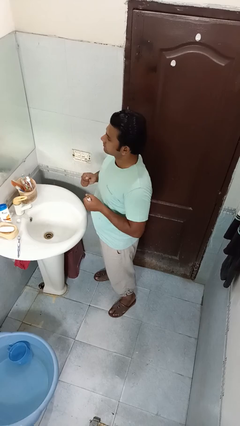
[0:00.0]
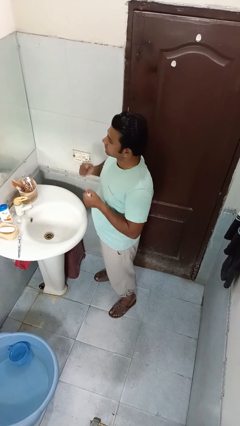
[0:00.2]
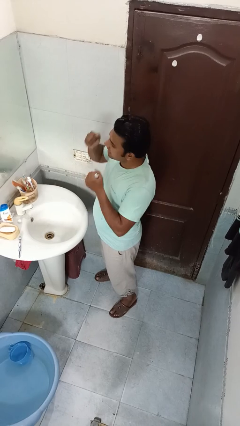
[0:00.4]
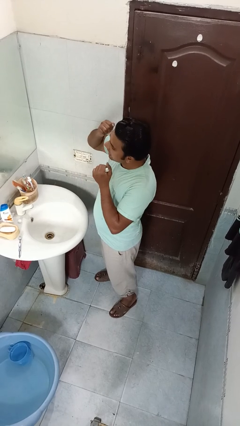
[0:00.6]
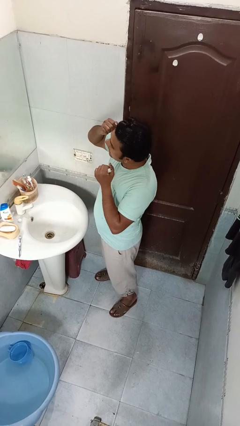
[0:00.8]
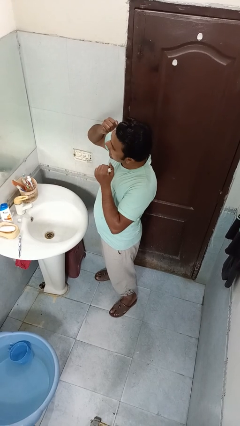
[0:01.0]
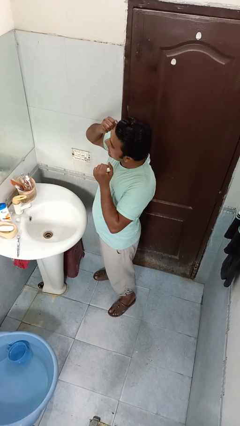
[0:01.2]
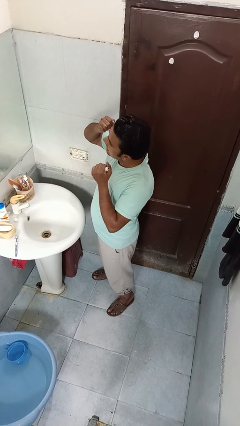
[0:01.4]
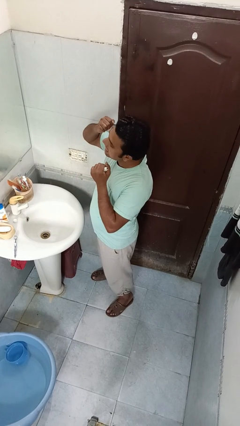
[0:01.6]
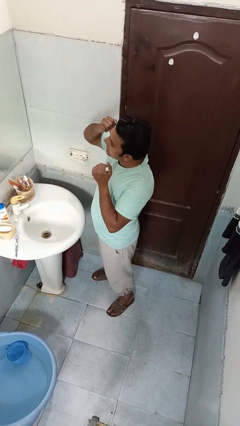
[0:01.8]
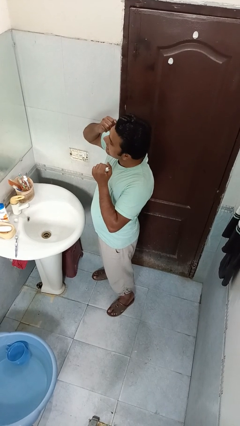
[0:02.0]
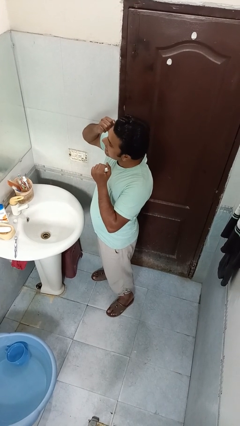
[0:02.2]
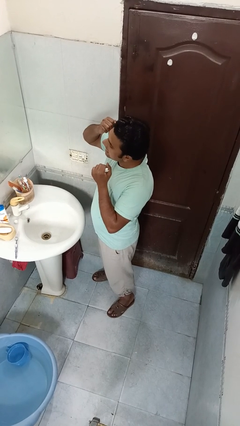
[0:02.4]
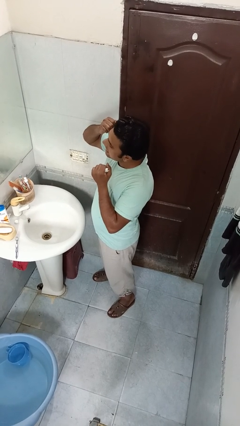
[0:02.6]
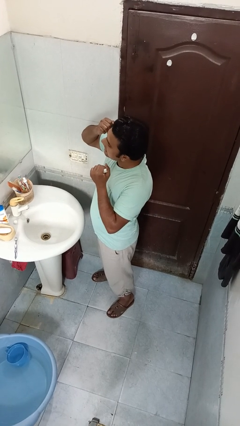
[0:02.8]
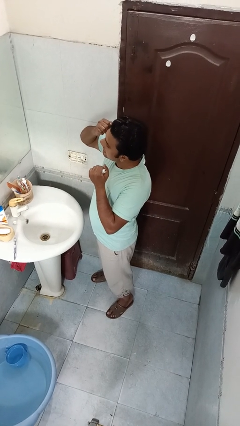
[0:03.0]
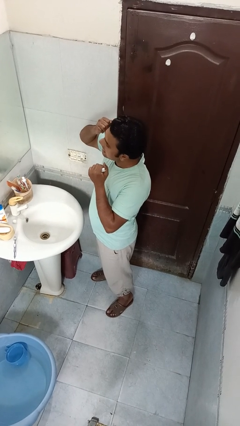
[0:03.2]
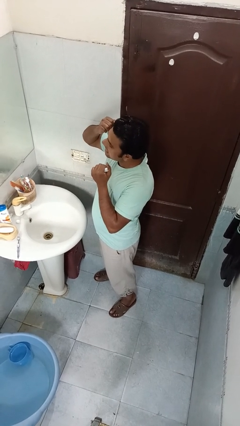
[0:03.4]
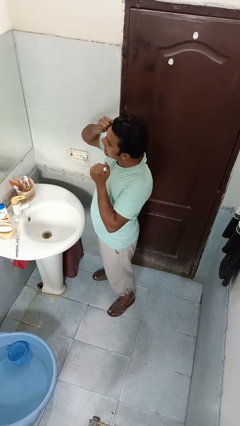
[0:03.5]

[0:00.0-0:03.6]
person flosses

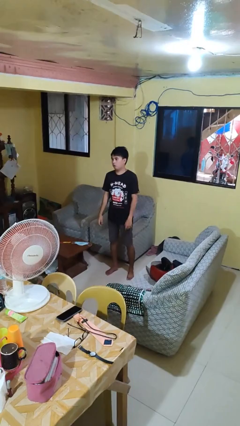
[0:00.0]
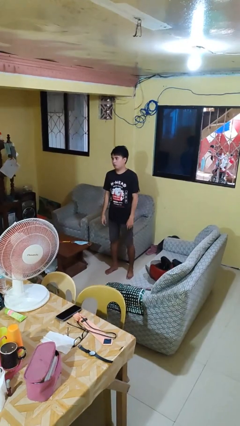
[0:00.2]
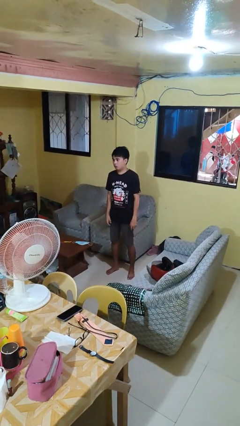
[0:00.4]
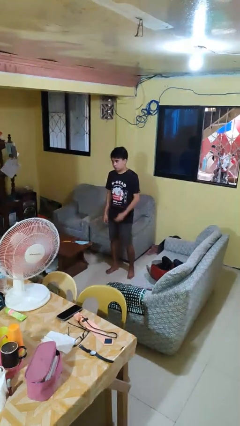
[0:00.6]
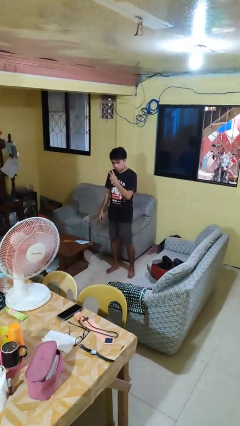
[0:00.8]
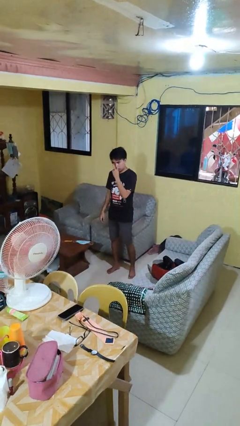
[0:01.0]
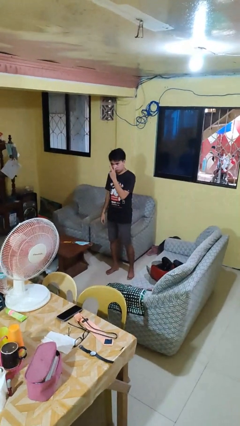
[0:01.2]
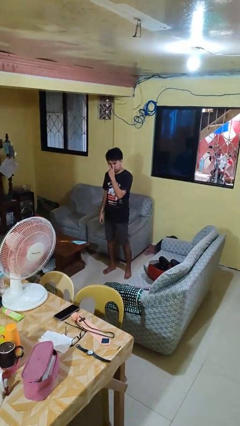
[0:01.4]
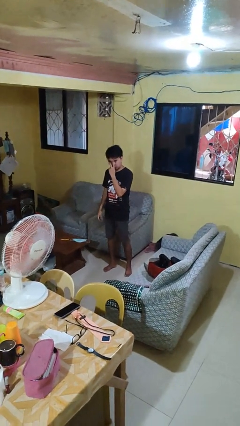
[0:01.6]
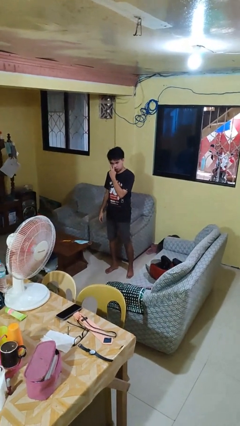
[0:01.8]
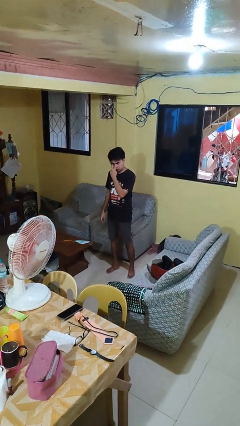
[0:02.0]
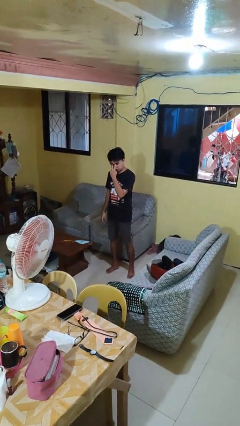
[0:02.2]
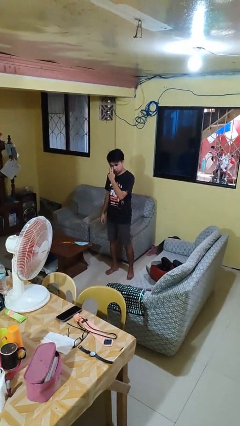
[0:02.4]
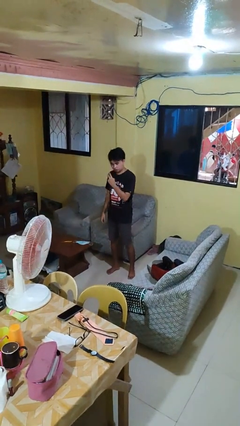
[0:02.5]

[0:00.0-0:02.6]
person gestures watch closely

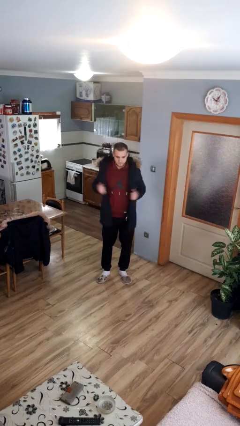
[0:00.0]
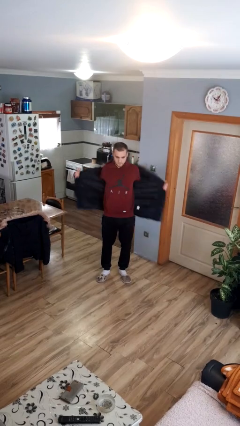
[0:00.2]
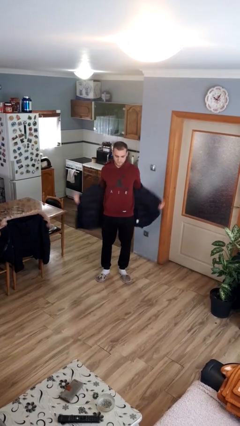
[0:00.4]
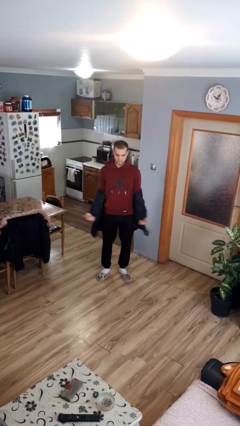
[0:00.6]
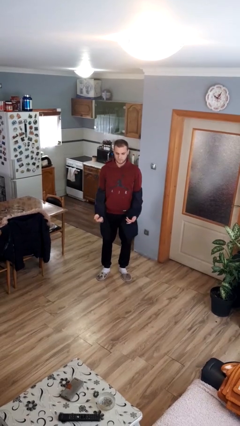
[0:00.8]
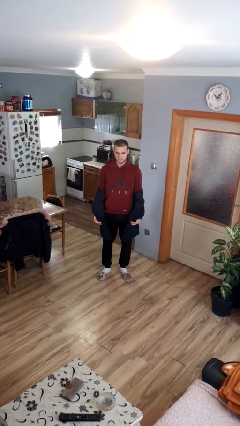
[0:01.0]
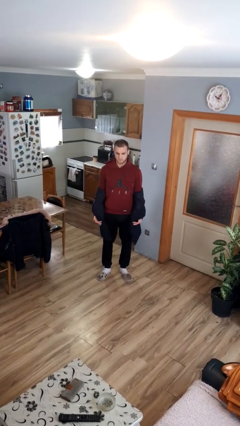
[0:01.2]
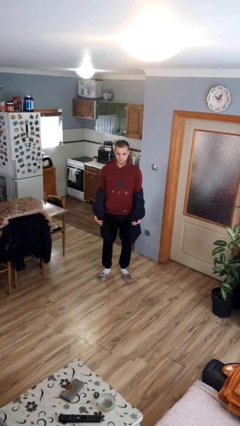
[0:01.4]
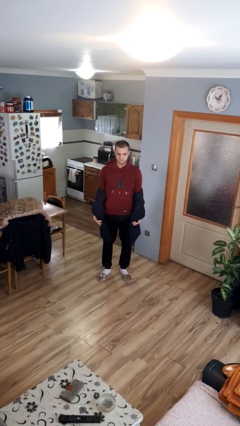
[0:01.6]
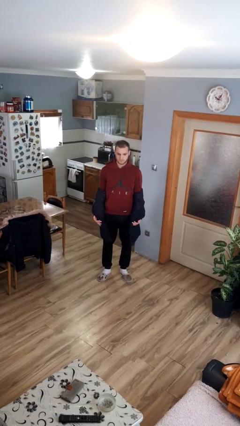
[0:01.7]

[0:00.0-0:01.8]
person takes off jacket

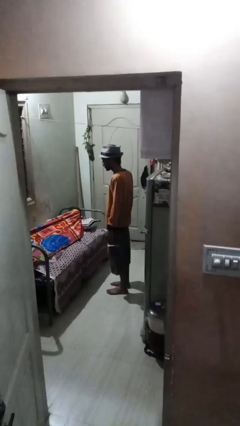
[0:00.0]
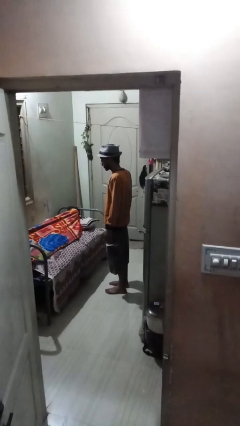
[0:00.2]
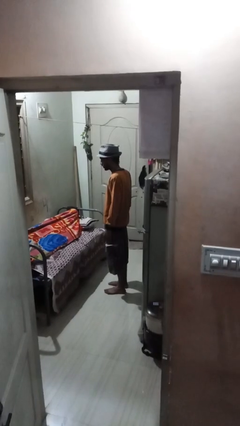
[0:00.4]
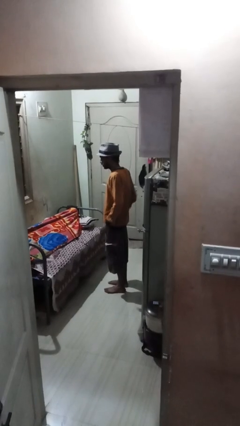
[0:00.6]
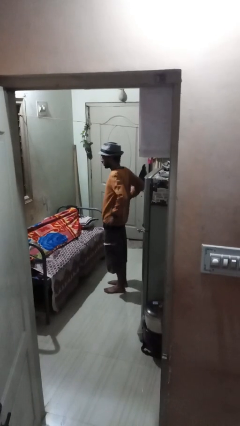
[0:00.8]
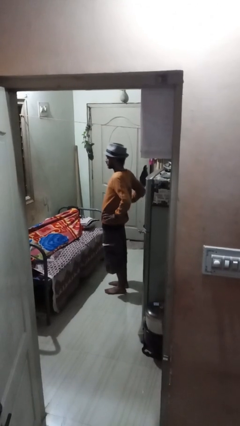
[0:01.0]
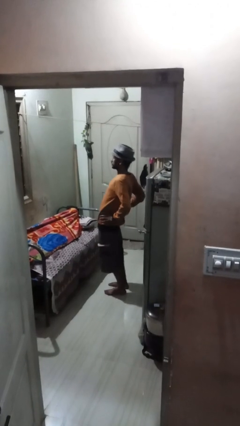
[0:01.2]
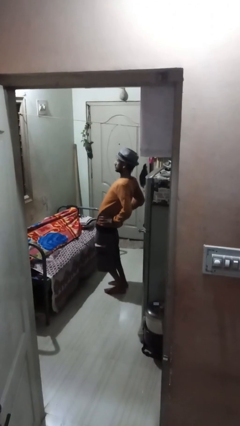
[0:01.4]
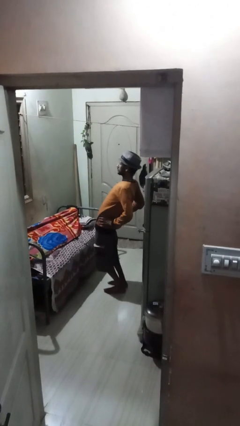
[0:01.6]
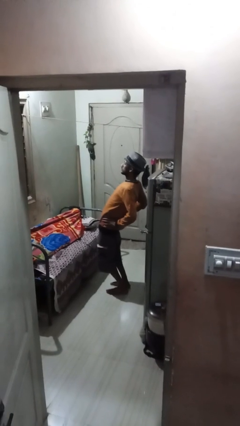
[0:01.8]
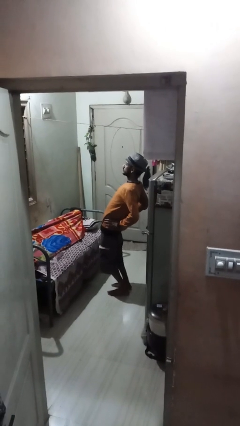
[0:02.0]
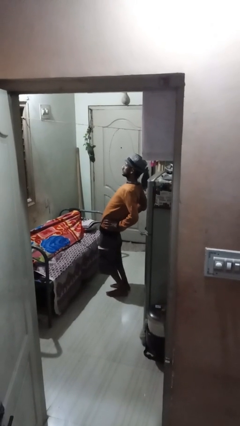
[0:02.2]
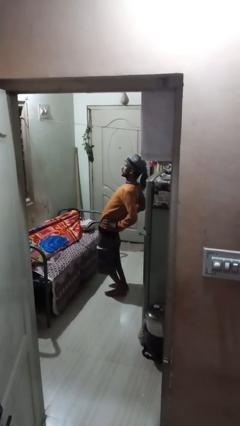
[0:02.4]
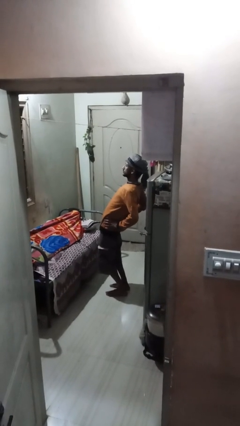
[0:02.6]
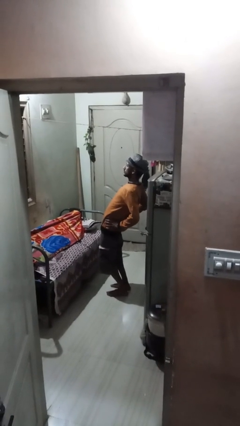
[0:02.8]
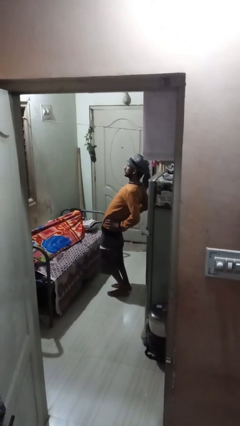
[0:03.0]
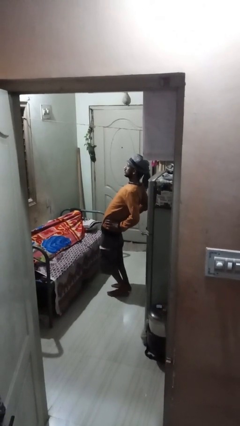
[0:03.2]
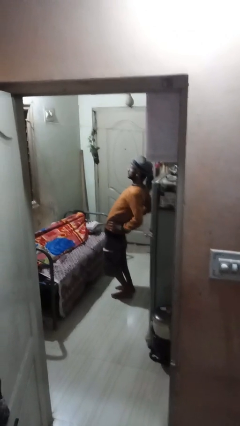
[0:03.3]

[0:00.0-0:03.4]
person stretches back

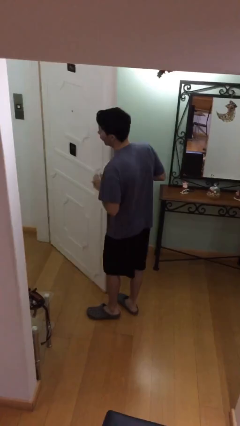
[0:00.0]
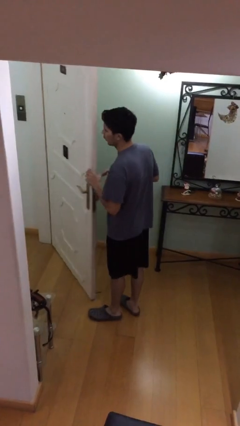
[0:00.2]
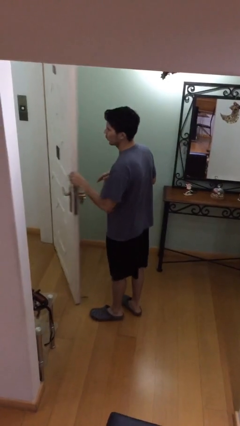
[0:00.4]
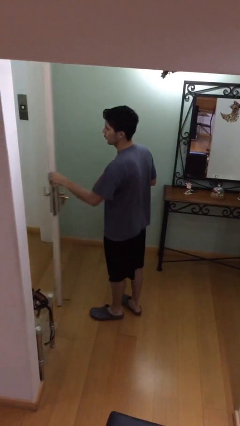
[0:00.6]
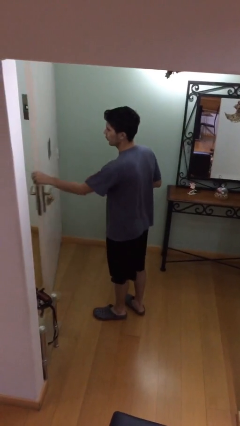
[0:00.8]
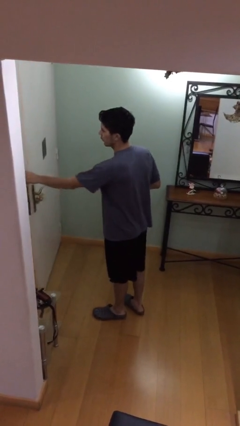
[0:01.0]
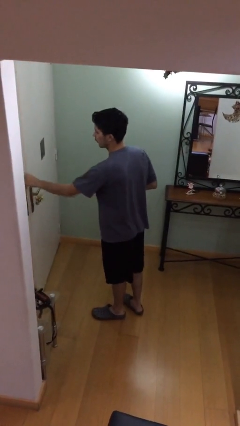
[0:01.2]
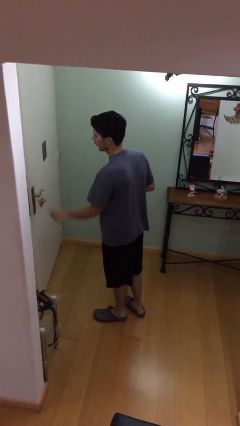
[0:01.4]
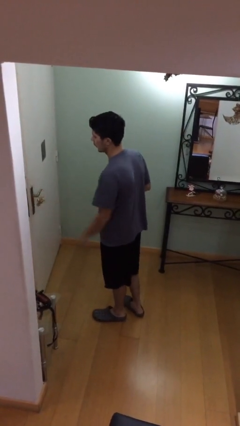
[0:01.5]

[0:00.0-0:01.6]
person closes facility door

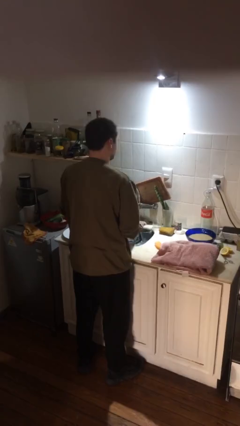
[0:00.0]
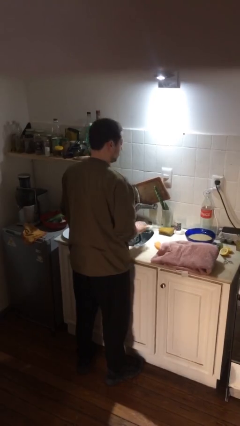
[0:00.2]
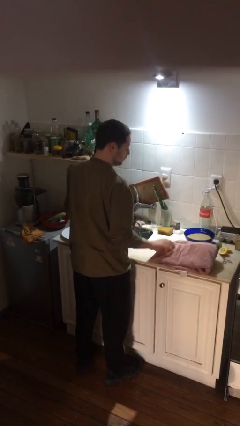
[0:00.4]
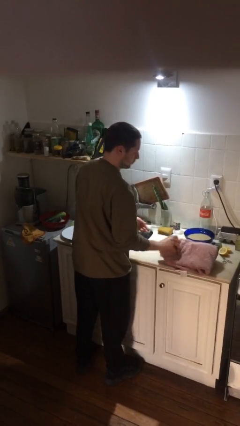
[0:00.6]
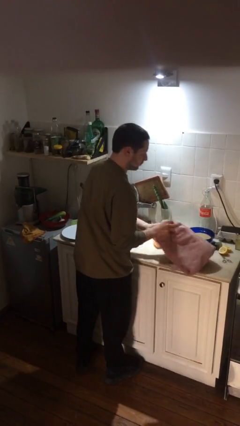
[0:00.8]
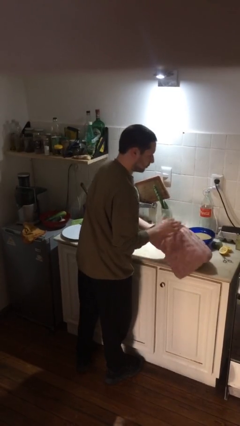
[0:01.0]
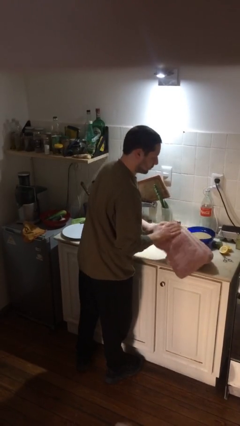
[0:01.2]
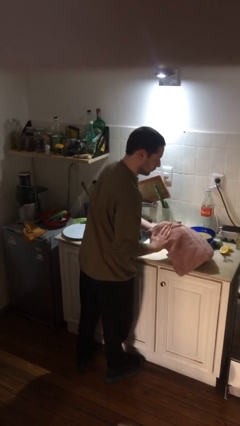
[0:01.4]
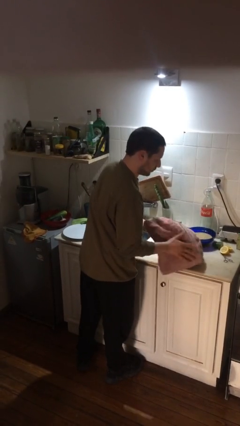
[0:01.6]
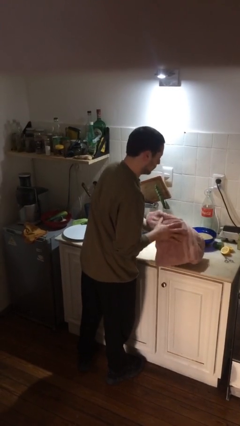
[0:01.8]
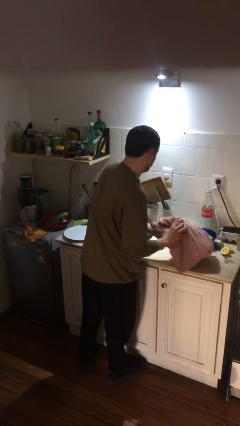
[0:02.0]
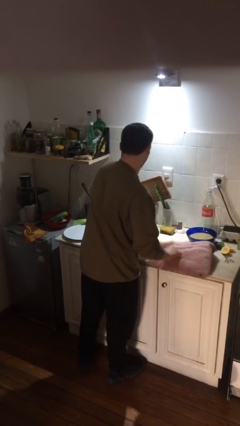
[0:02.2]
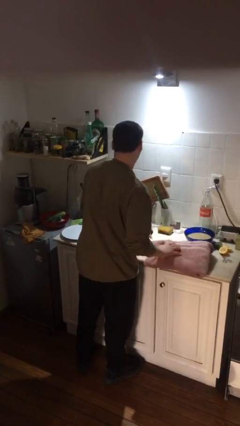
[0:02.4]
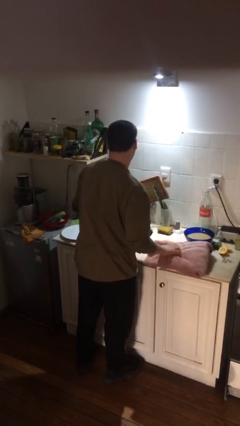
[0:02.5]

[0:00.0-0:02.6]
person dries hands with towel

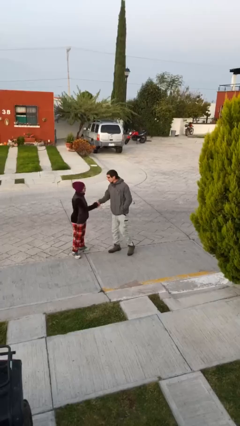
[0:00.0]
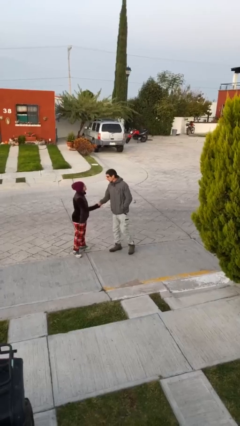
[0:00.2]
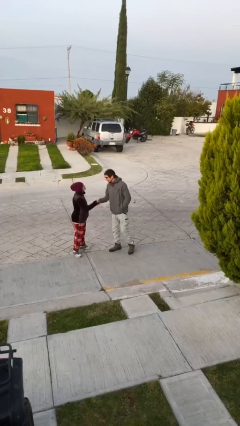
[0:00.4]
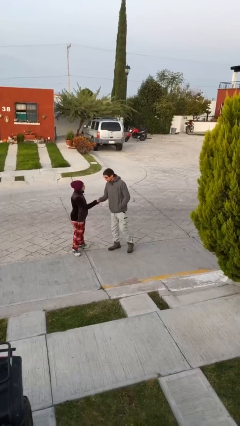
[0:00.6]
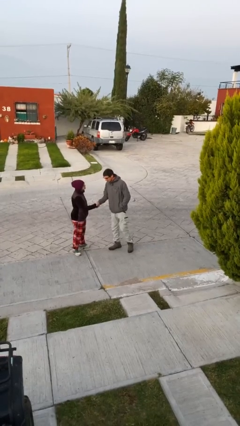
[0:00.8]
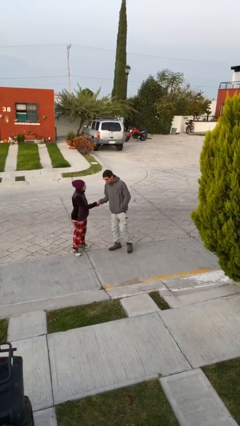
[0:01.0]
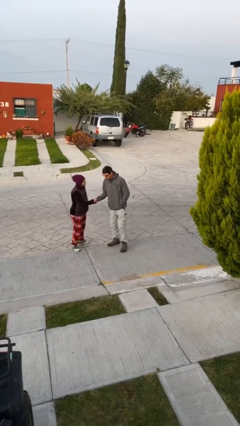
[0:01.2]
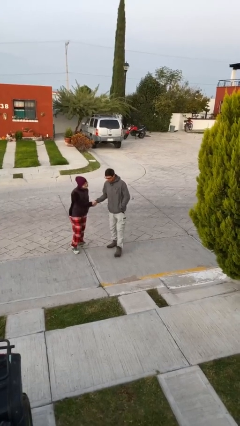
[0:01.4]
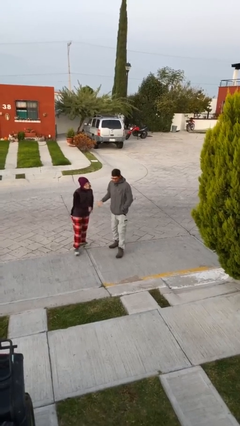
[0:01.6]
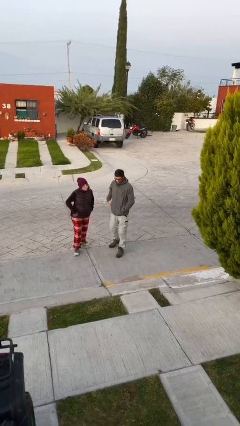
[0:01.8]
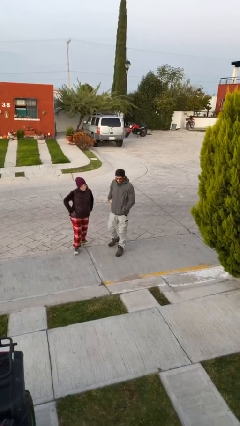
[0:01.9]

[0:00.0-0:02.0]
person shakes hand
